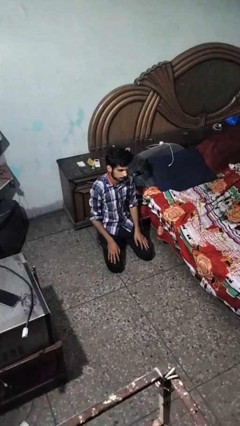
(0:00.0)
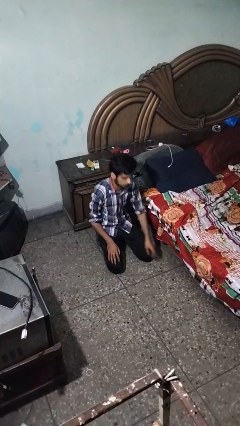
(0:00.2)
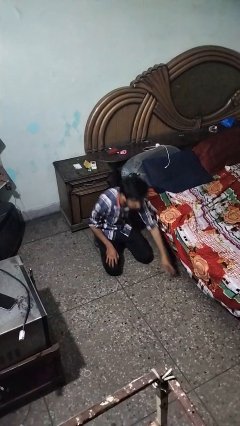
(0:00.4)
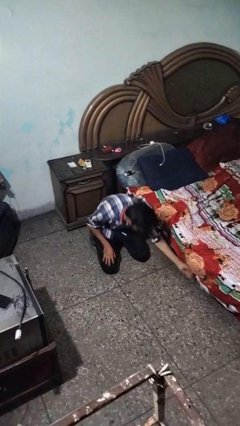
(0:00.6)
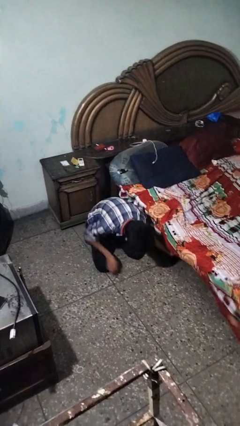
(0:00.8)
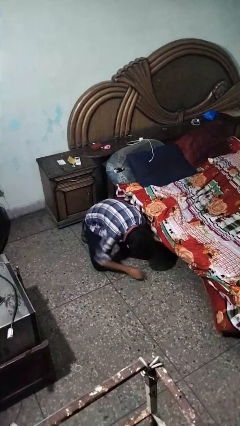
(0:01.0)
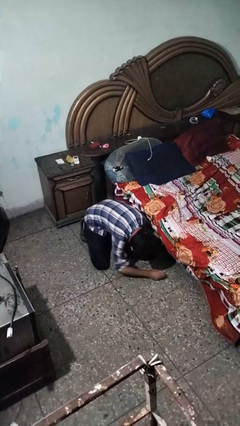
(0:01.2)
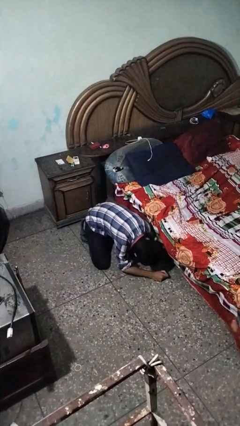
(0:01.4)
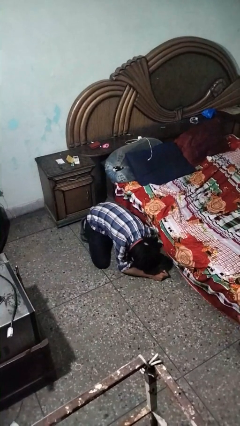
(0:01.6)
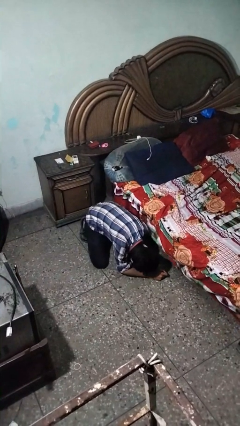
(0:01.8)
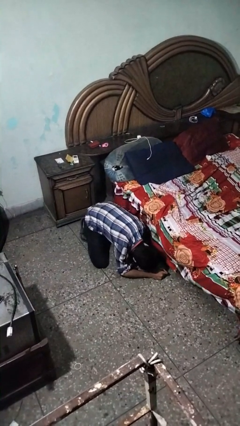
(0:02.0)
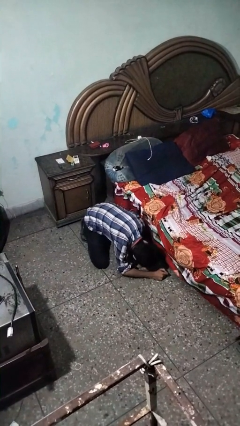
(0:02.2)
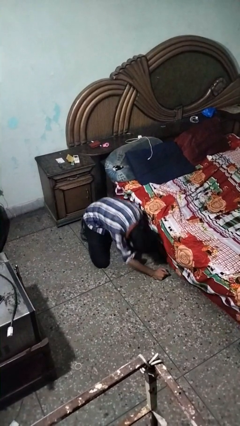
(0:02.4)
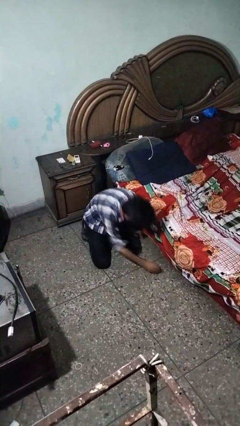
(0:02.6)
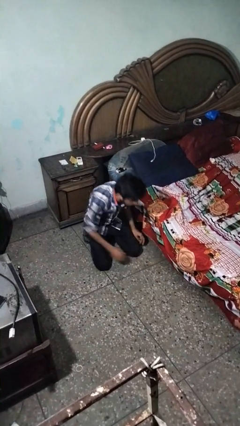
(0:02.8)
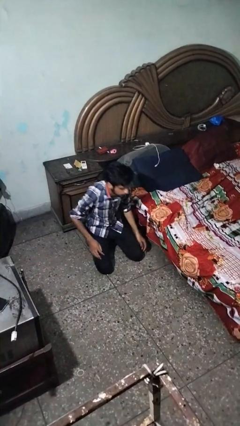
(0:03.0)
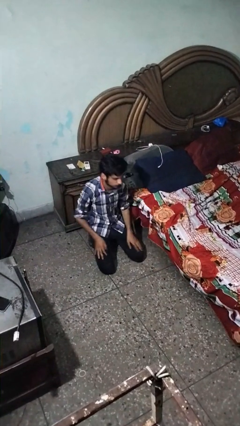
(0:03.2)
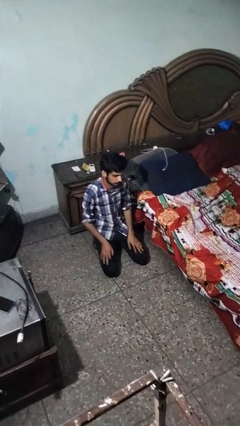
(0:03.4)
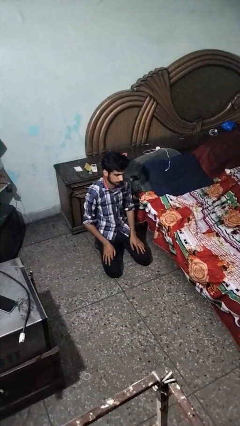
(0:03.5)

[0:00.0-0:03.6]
person searches under bed

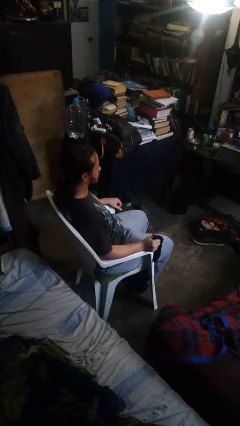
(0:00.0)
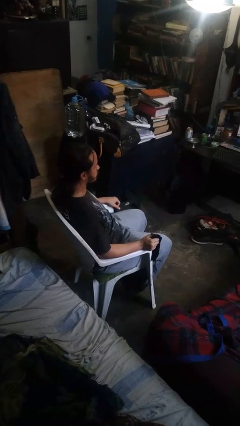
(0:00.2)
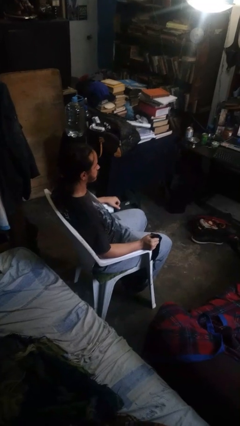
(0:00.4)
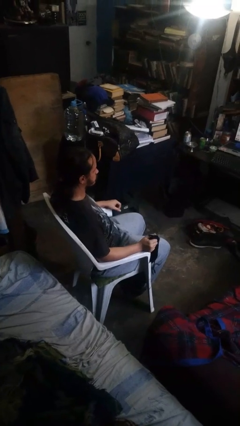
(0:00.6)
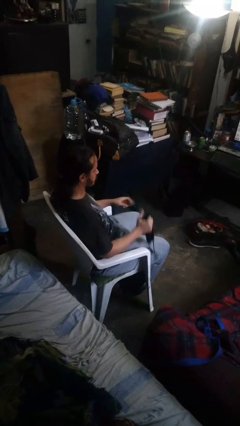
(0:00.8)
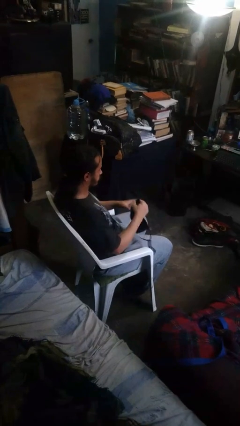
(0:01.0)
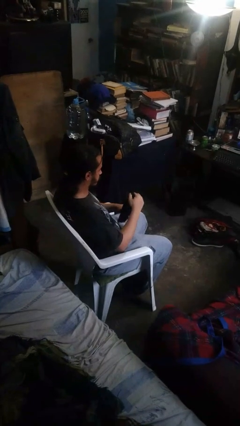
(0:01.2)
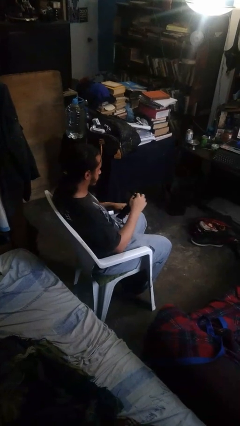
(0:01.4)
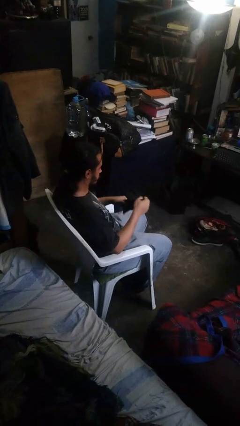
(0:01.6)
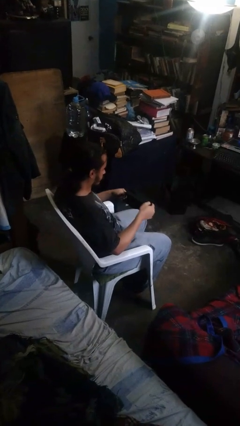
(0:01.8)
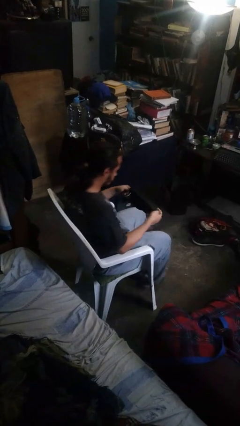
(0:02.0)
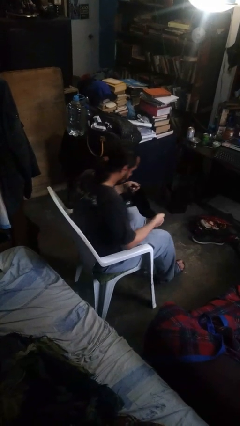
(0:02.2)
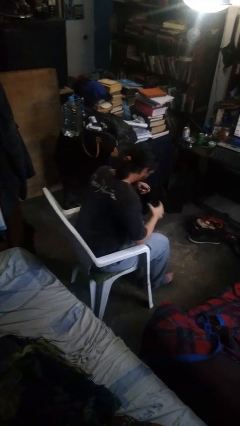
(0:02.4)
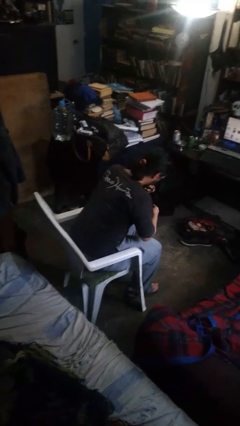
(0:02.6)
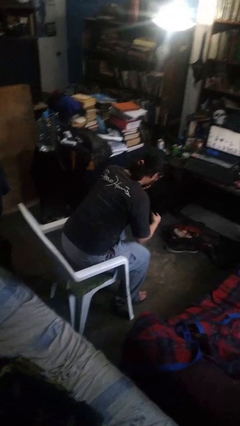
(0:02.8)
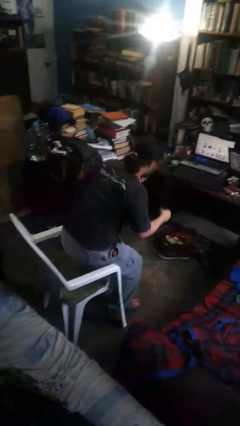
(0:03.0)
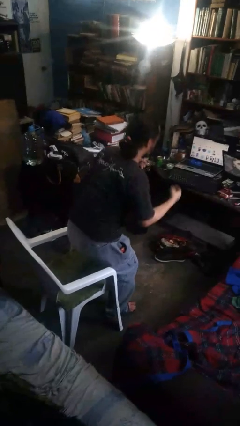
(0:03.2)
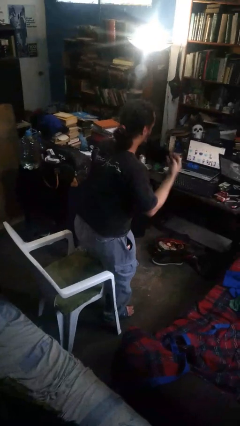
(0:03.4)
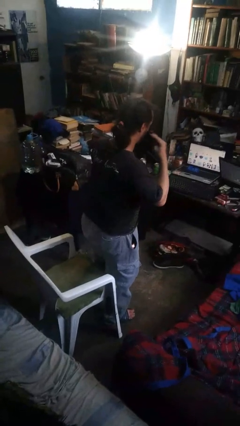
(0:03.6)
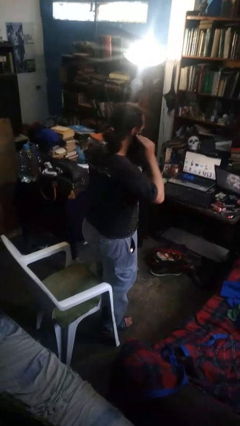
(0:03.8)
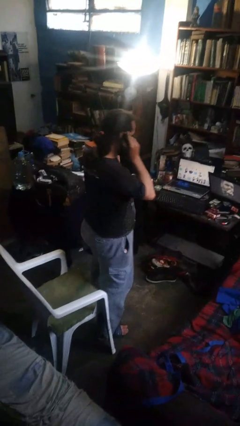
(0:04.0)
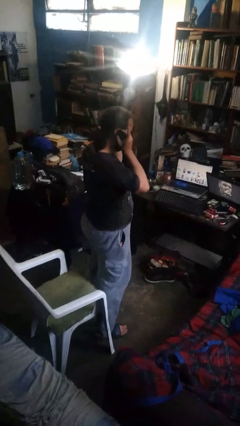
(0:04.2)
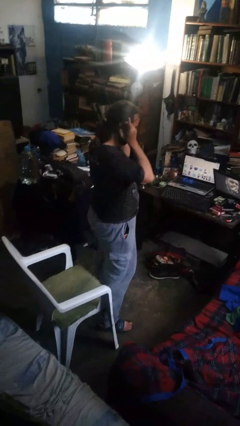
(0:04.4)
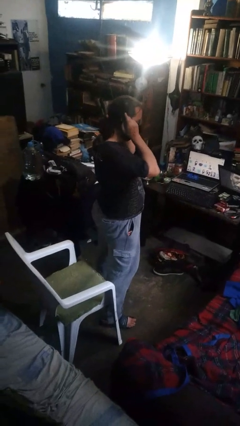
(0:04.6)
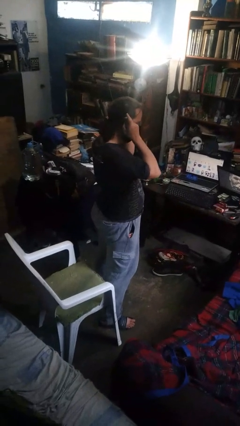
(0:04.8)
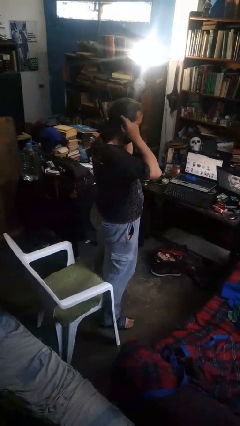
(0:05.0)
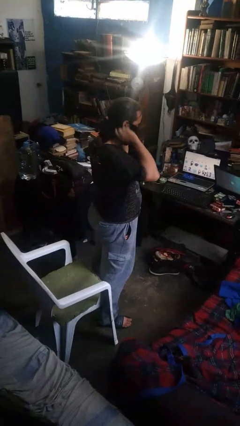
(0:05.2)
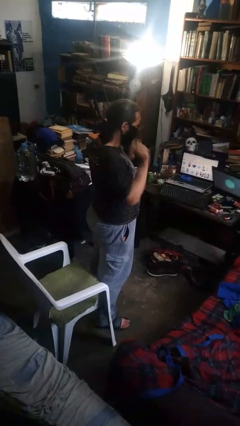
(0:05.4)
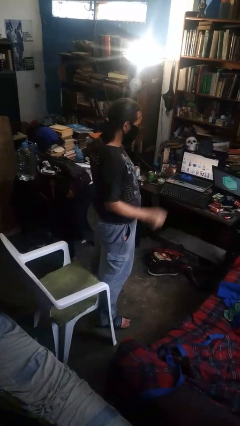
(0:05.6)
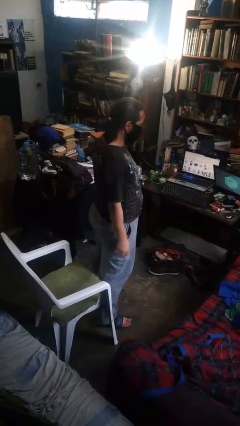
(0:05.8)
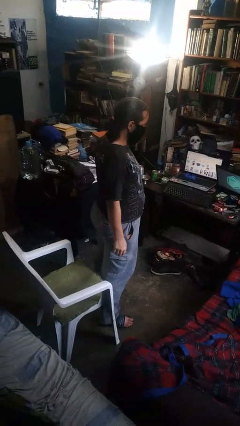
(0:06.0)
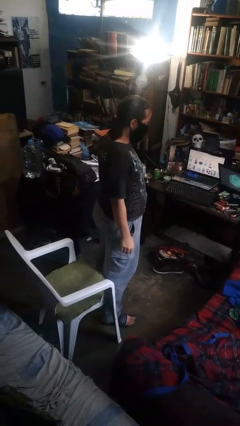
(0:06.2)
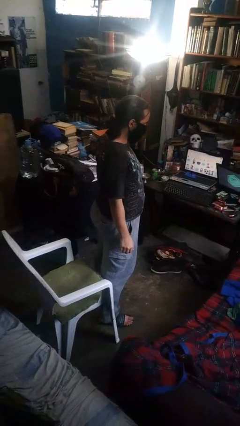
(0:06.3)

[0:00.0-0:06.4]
person puts on facemask

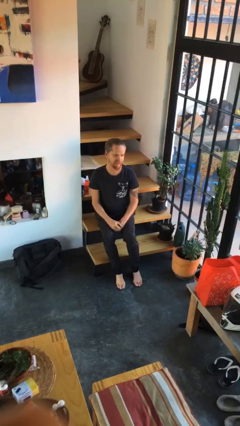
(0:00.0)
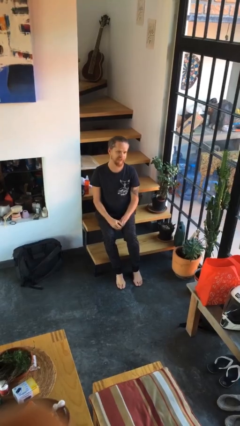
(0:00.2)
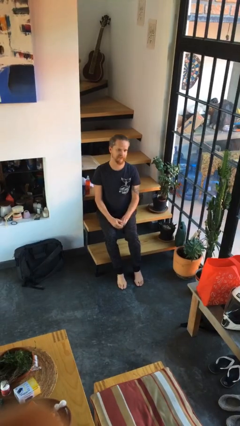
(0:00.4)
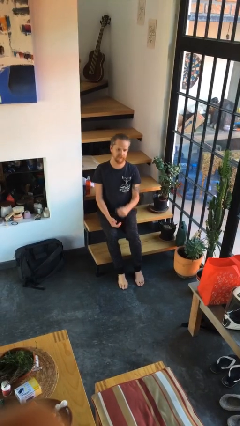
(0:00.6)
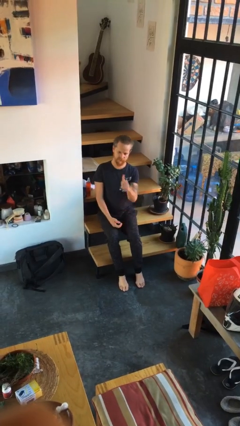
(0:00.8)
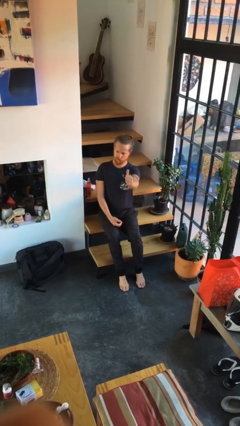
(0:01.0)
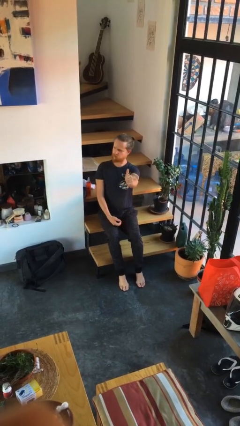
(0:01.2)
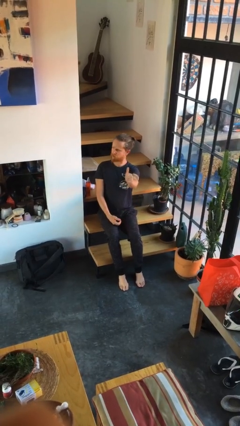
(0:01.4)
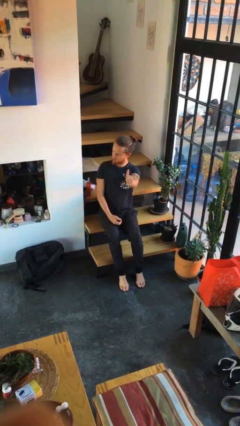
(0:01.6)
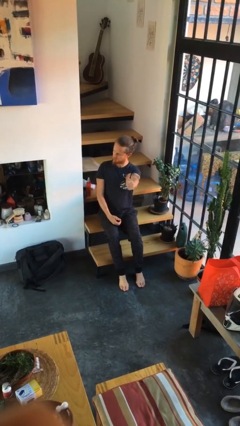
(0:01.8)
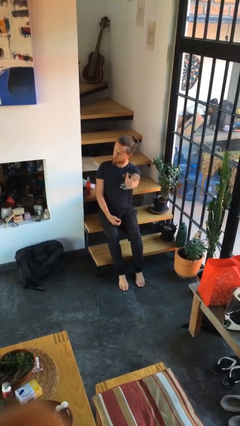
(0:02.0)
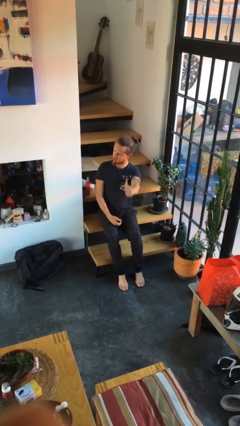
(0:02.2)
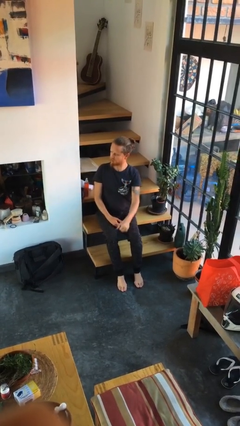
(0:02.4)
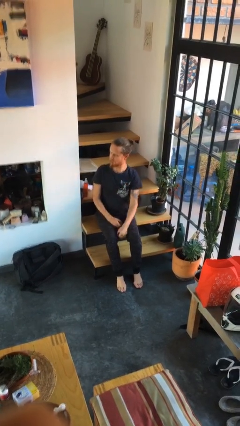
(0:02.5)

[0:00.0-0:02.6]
person gestures thumbs up

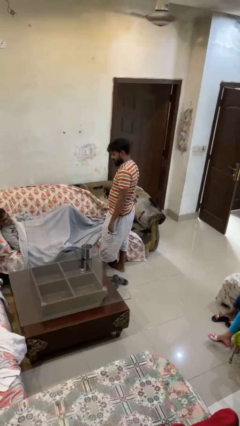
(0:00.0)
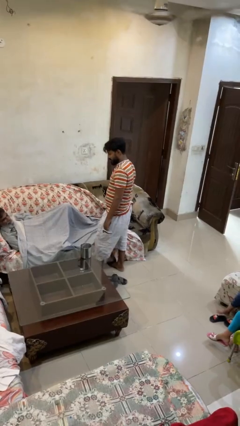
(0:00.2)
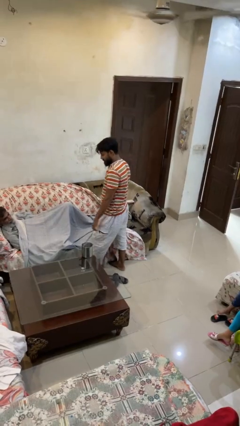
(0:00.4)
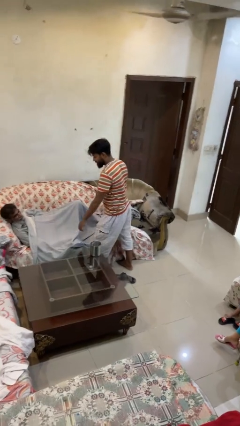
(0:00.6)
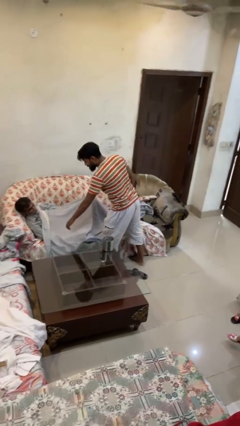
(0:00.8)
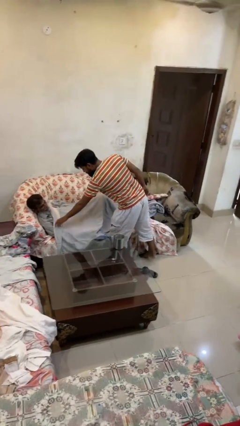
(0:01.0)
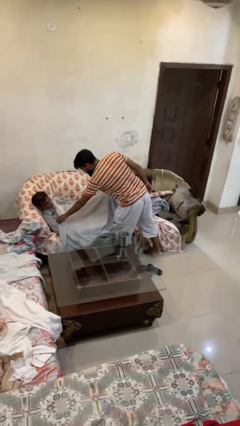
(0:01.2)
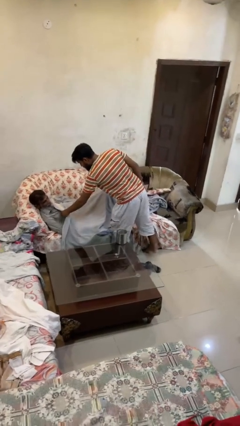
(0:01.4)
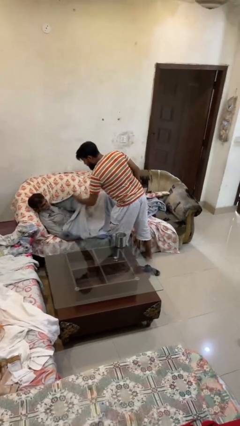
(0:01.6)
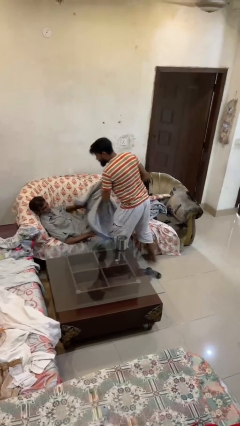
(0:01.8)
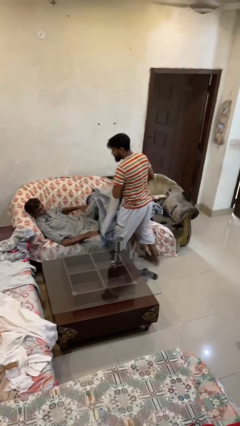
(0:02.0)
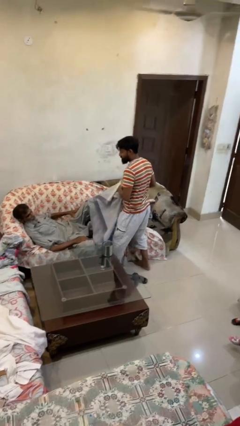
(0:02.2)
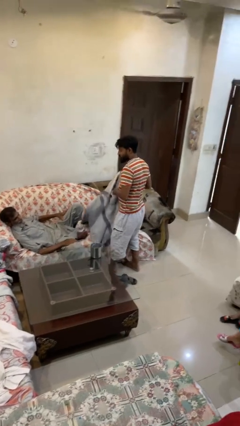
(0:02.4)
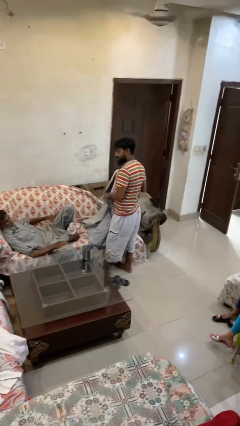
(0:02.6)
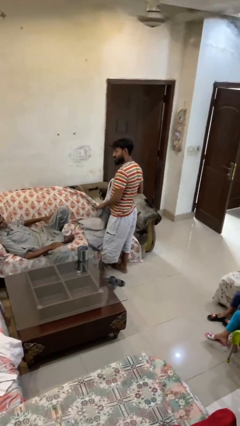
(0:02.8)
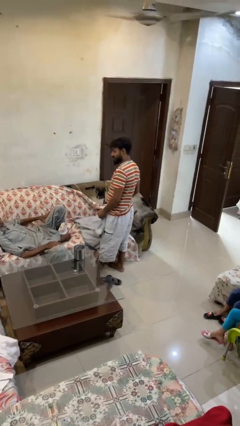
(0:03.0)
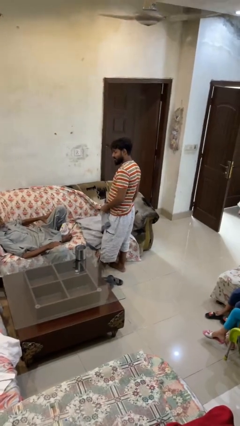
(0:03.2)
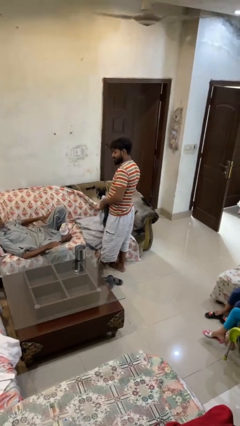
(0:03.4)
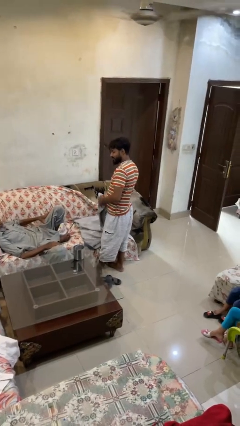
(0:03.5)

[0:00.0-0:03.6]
person uncovers friend with blanket

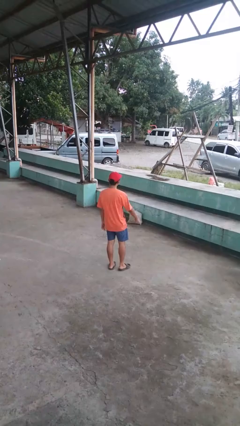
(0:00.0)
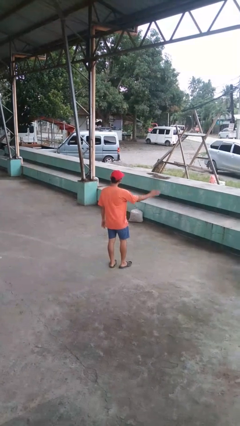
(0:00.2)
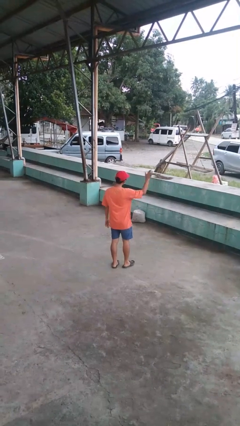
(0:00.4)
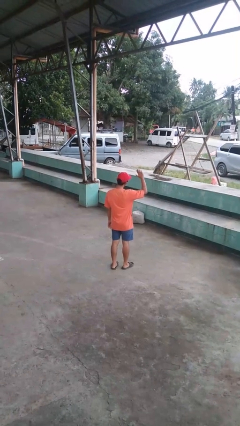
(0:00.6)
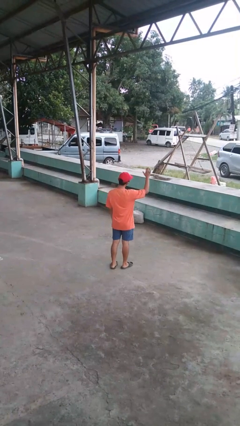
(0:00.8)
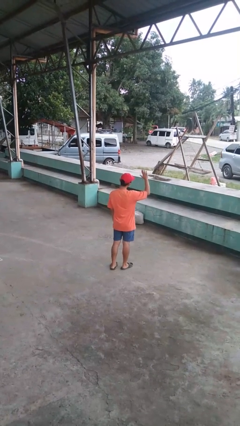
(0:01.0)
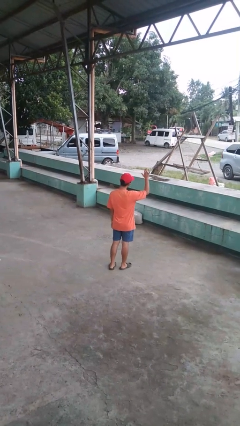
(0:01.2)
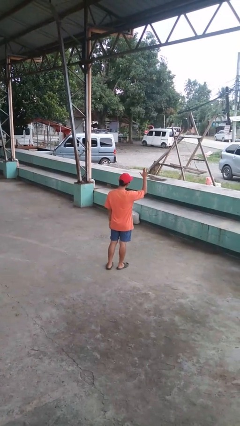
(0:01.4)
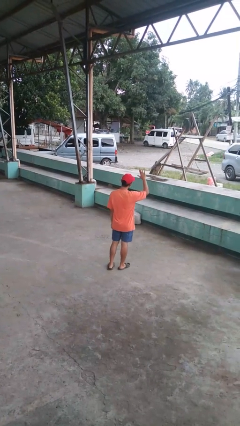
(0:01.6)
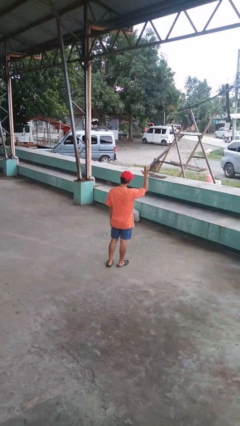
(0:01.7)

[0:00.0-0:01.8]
person waves at person
